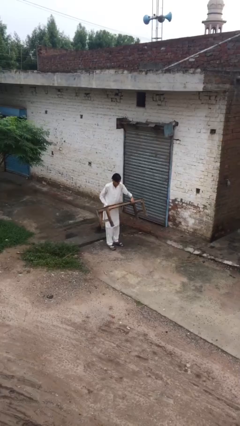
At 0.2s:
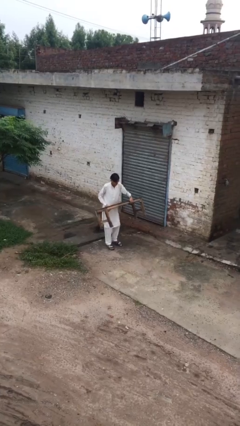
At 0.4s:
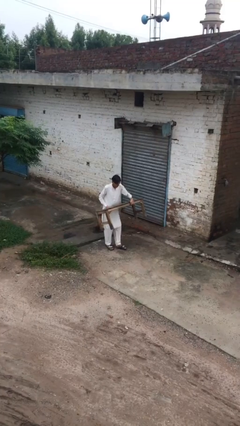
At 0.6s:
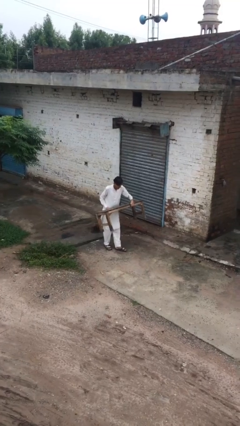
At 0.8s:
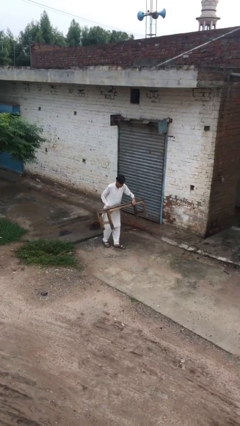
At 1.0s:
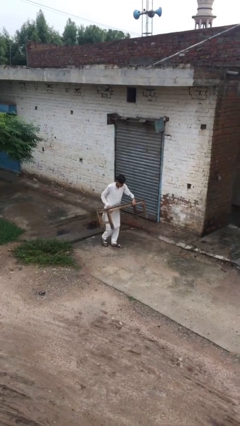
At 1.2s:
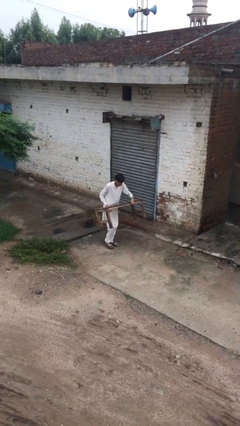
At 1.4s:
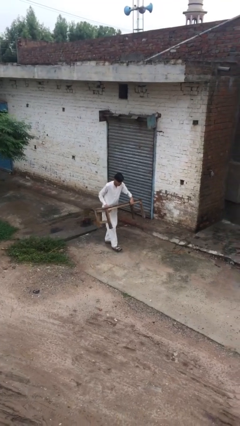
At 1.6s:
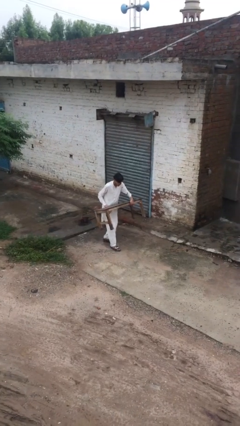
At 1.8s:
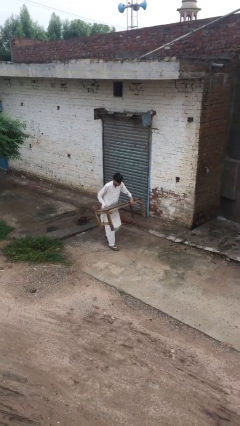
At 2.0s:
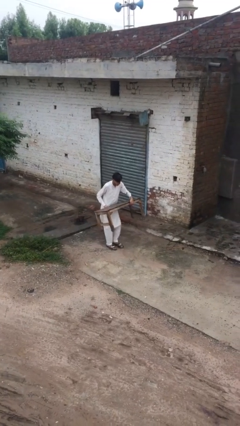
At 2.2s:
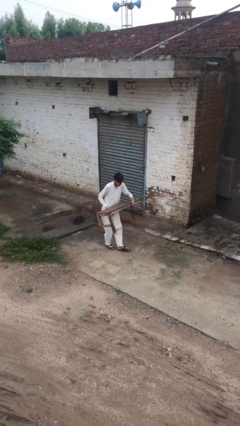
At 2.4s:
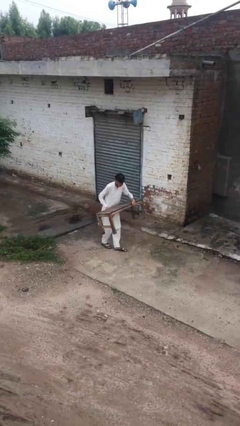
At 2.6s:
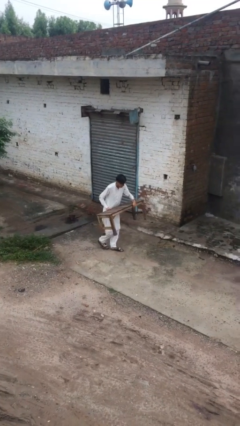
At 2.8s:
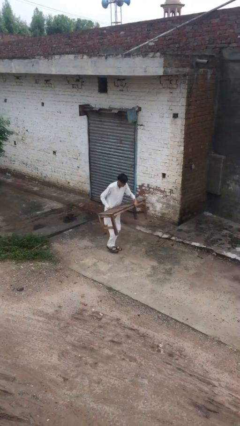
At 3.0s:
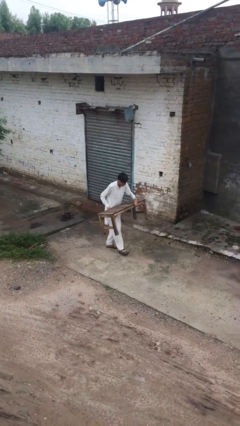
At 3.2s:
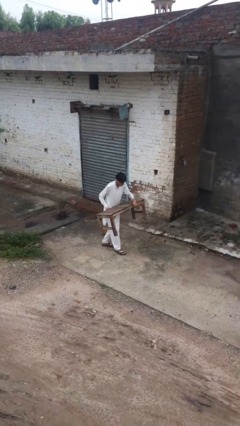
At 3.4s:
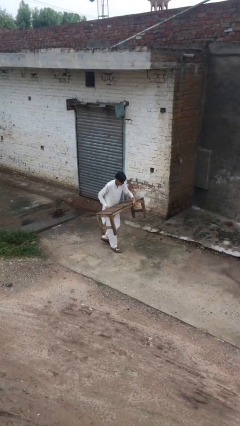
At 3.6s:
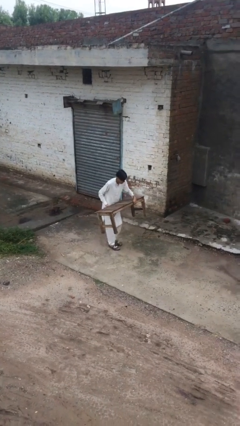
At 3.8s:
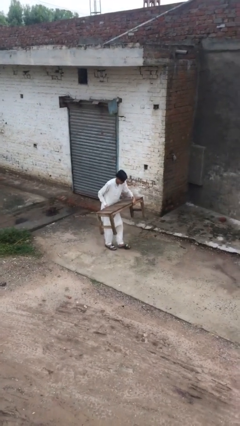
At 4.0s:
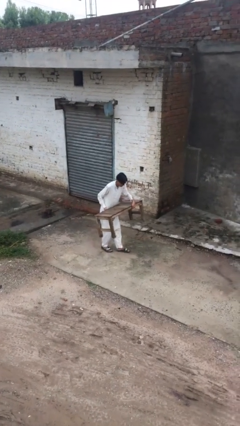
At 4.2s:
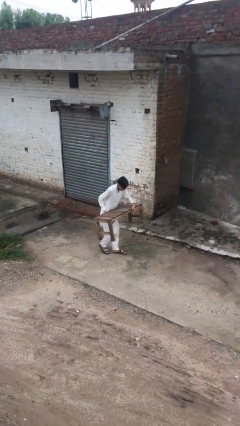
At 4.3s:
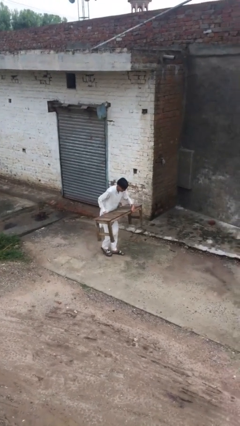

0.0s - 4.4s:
person carries heavy object

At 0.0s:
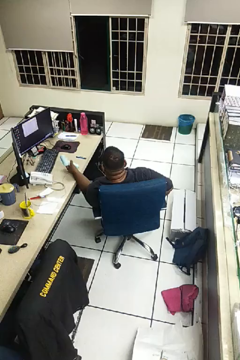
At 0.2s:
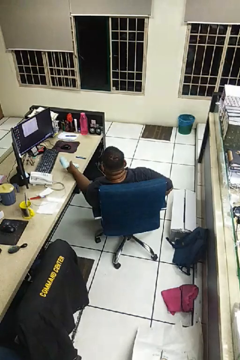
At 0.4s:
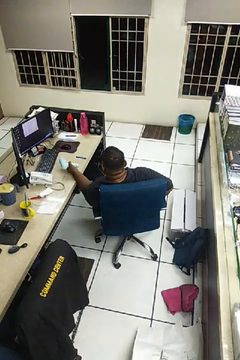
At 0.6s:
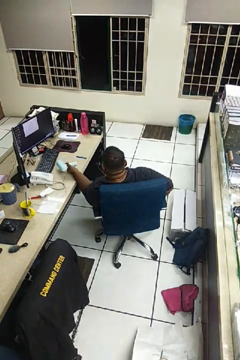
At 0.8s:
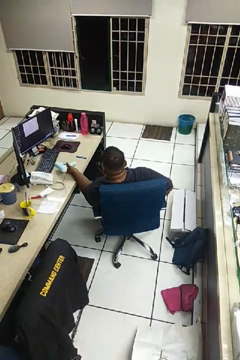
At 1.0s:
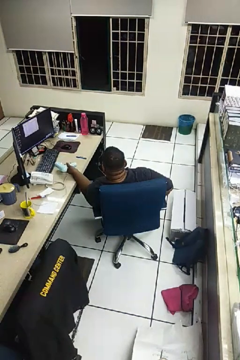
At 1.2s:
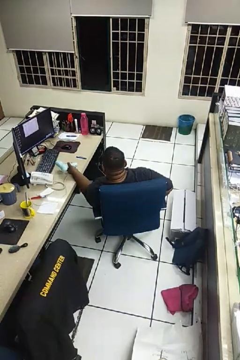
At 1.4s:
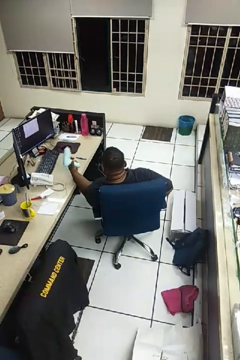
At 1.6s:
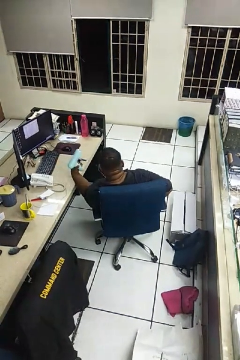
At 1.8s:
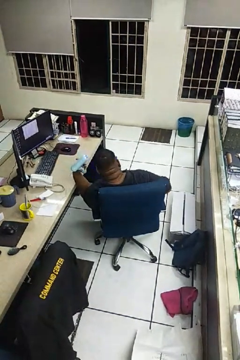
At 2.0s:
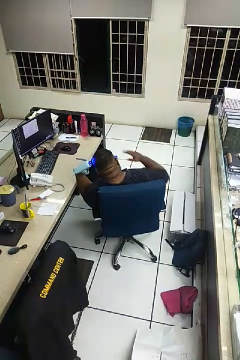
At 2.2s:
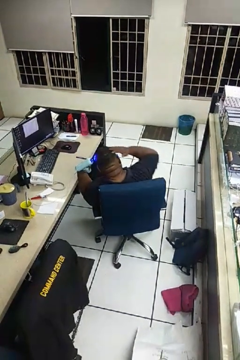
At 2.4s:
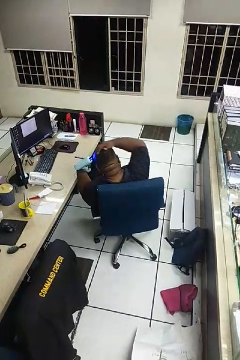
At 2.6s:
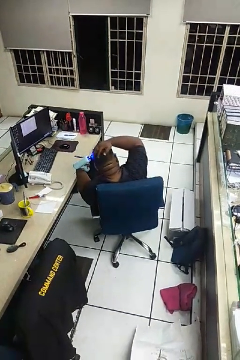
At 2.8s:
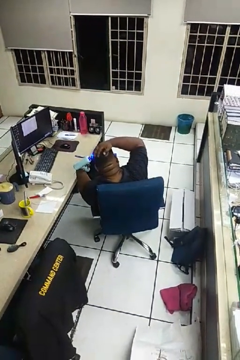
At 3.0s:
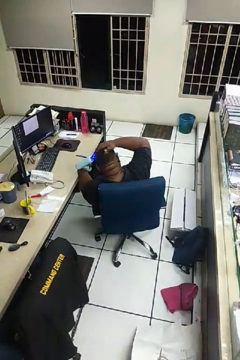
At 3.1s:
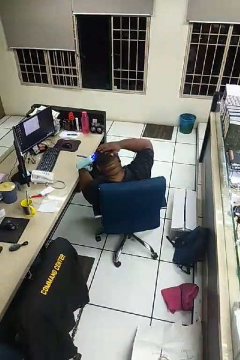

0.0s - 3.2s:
person dries hair with hairdryer

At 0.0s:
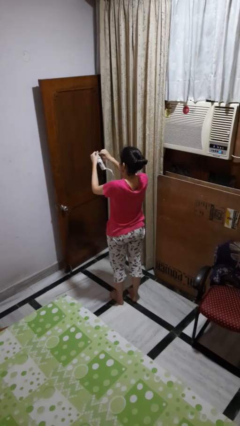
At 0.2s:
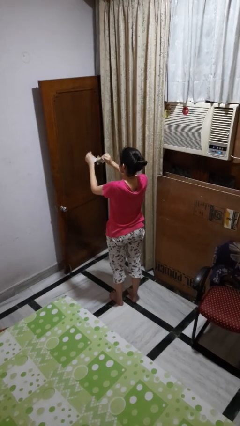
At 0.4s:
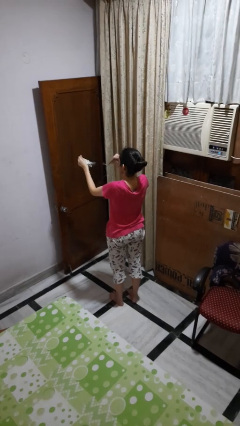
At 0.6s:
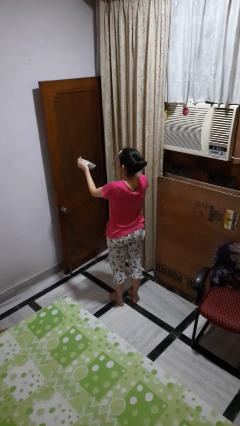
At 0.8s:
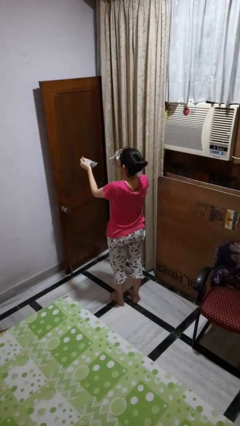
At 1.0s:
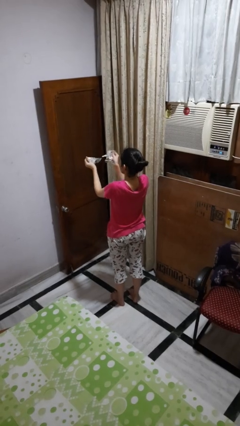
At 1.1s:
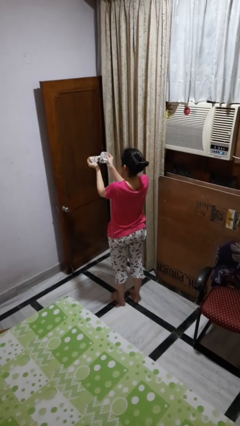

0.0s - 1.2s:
person tears paper

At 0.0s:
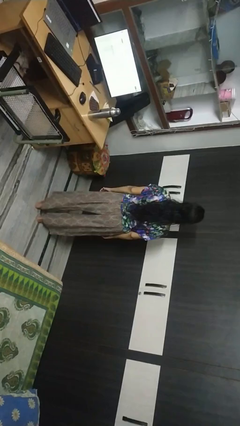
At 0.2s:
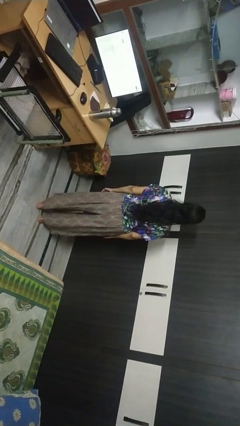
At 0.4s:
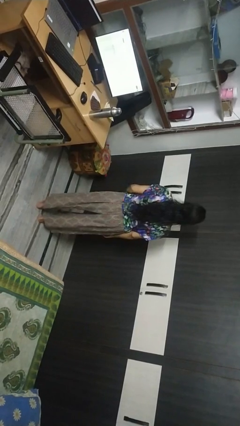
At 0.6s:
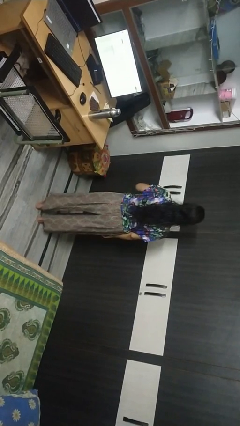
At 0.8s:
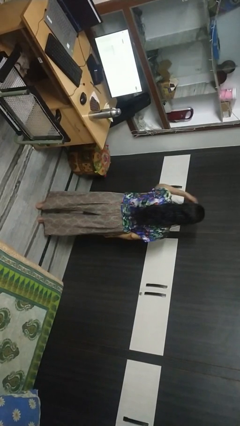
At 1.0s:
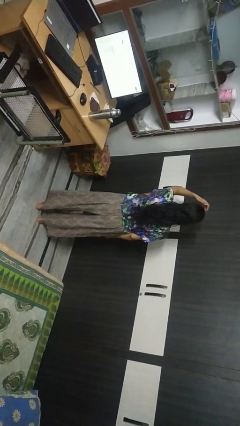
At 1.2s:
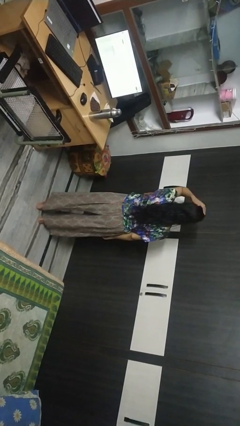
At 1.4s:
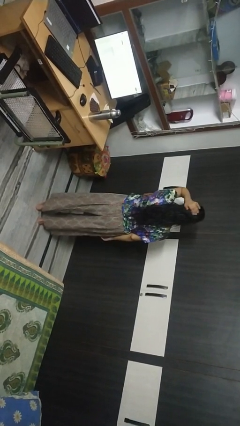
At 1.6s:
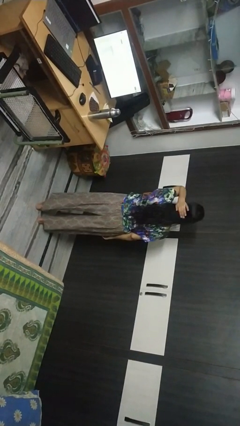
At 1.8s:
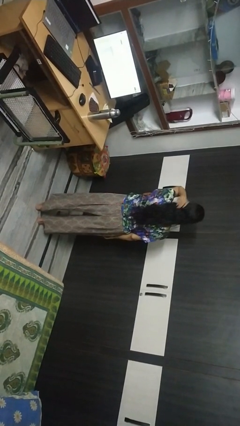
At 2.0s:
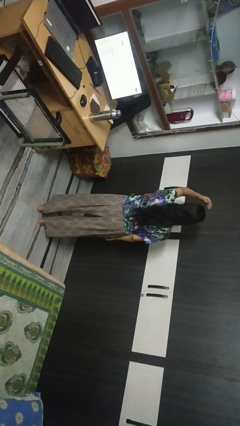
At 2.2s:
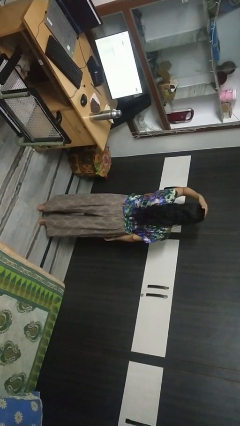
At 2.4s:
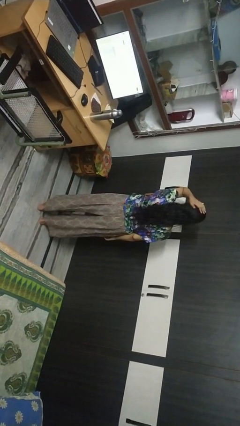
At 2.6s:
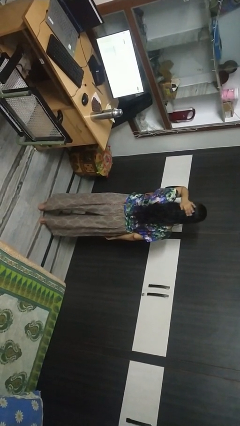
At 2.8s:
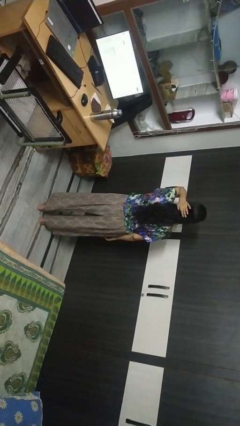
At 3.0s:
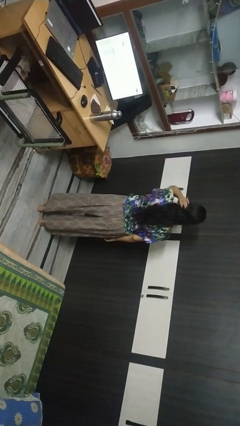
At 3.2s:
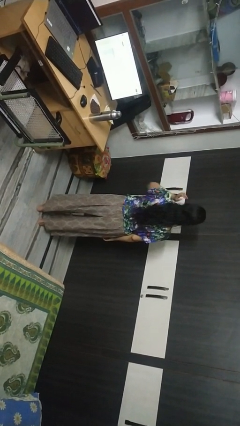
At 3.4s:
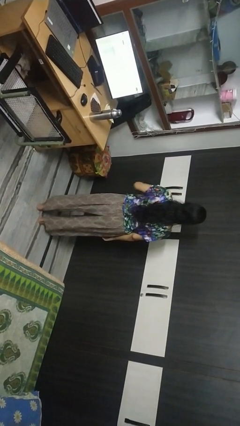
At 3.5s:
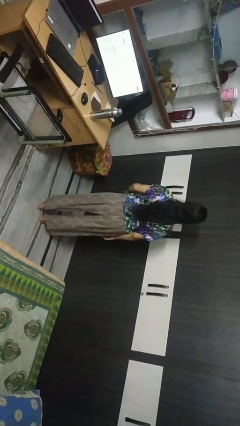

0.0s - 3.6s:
person pats head

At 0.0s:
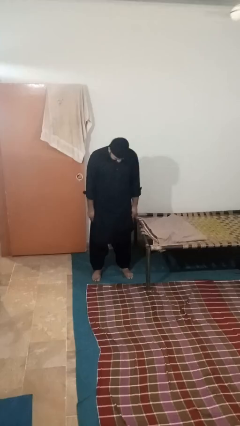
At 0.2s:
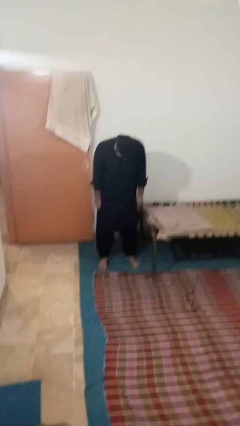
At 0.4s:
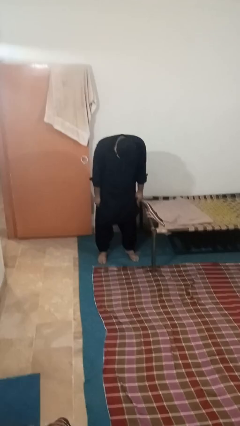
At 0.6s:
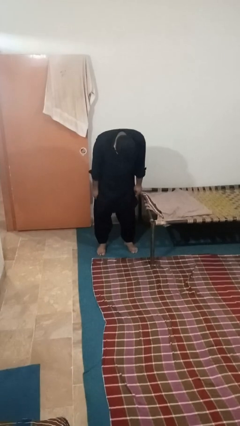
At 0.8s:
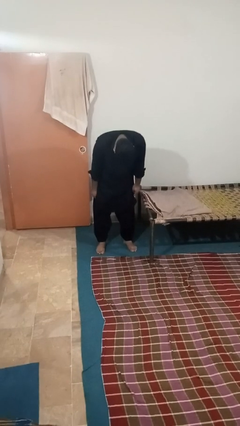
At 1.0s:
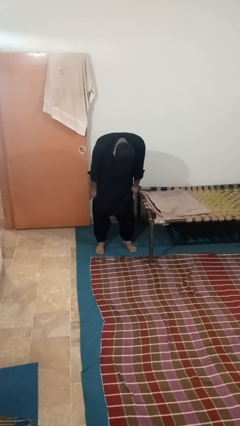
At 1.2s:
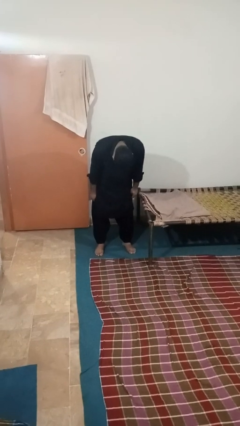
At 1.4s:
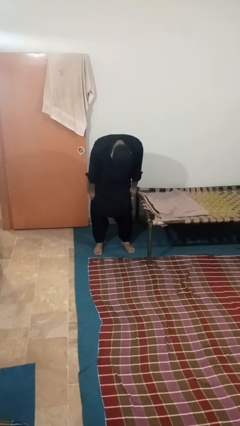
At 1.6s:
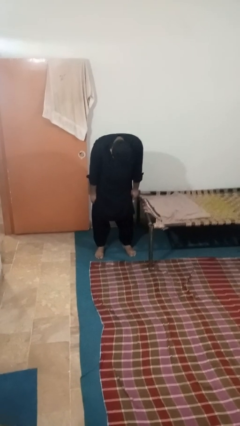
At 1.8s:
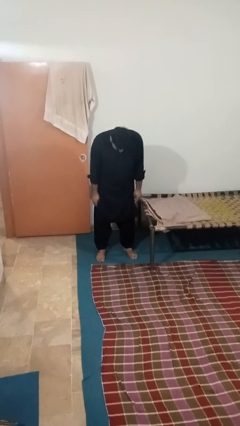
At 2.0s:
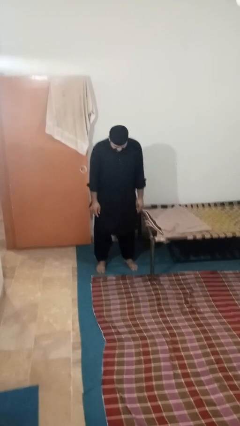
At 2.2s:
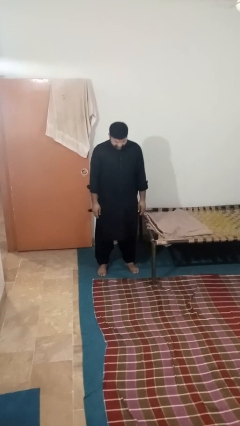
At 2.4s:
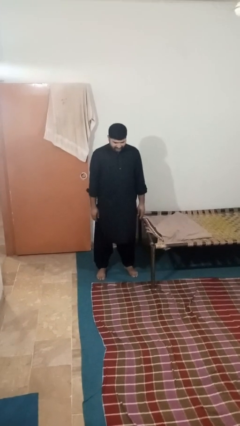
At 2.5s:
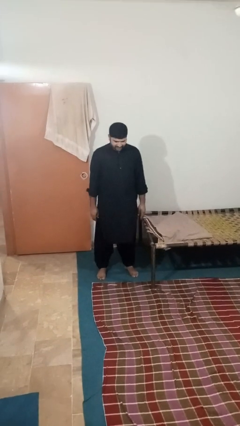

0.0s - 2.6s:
person bows

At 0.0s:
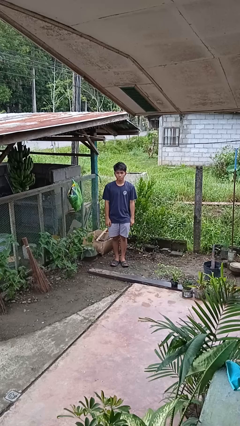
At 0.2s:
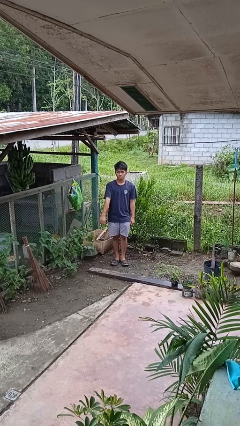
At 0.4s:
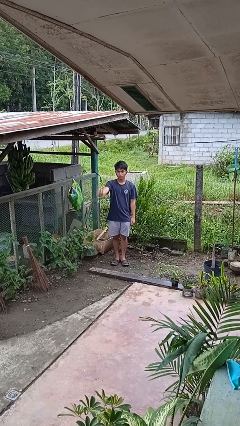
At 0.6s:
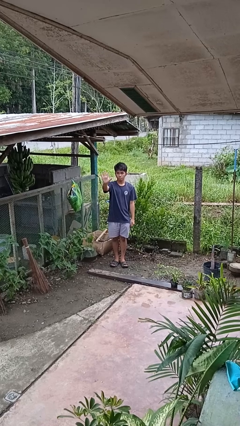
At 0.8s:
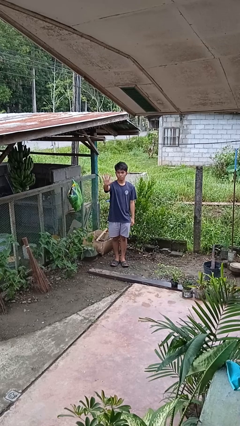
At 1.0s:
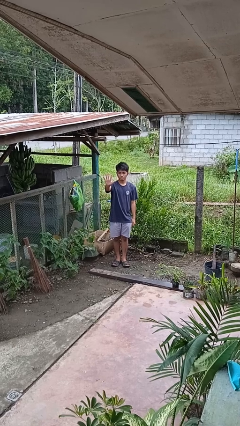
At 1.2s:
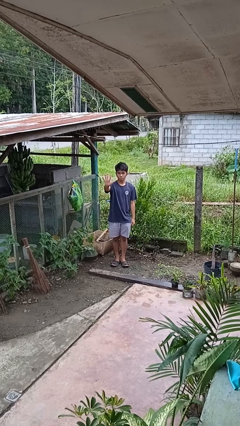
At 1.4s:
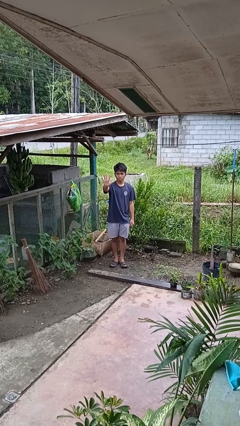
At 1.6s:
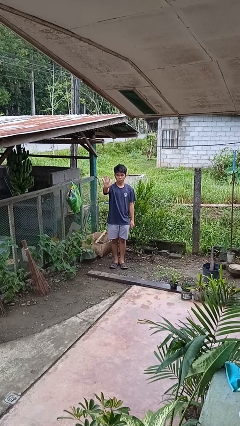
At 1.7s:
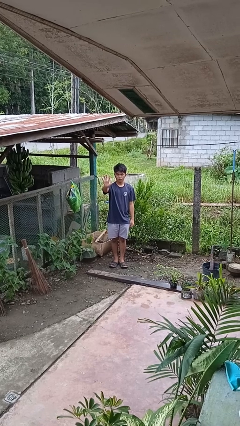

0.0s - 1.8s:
person gestures number five

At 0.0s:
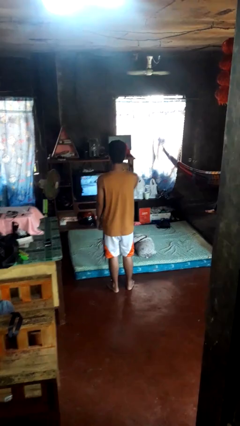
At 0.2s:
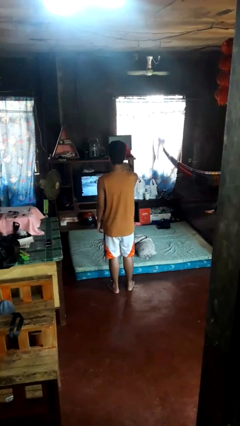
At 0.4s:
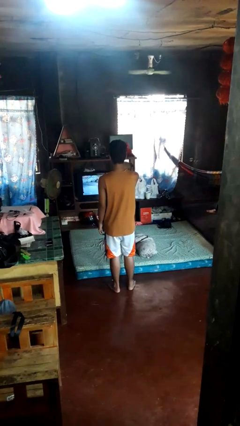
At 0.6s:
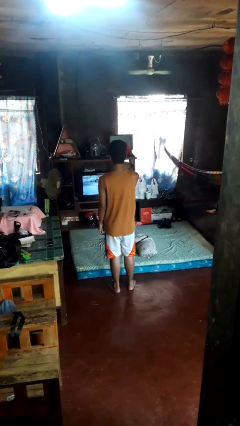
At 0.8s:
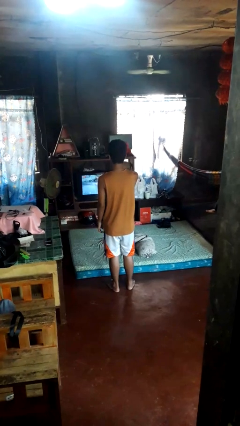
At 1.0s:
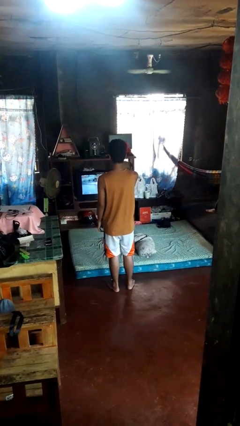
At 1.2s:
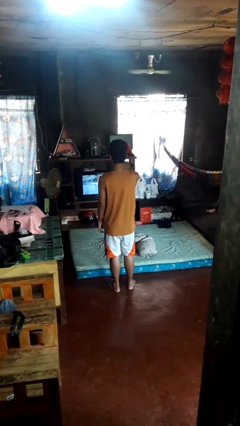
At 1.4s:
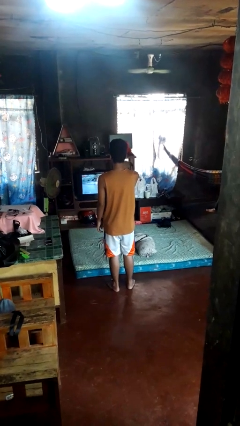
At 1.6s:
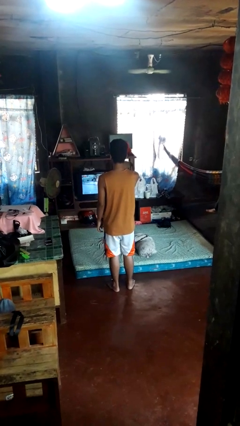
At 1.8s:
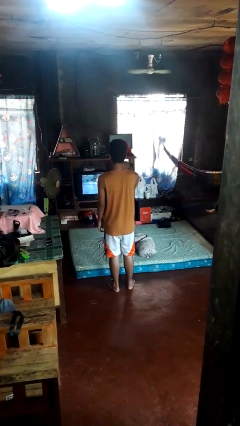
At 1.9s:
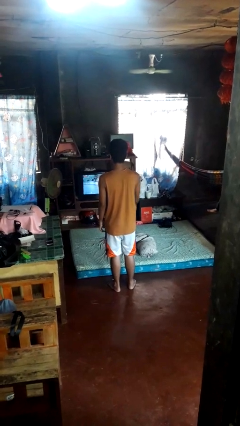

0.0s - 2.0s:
person uses television remote
